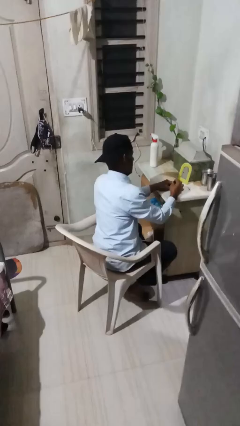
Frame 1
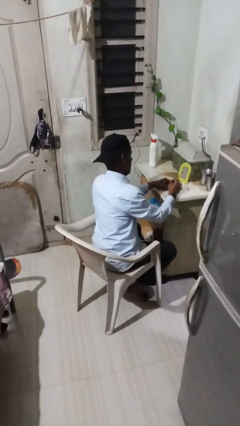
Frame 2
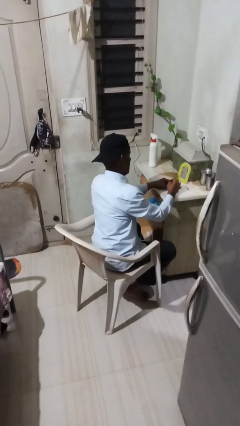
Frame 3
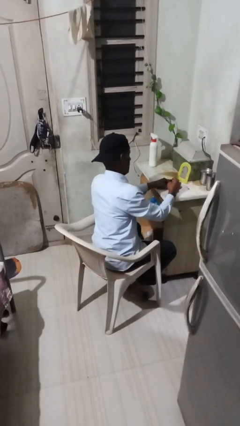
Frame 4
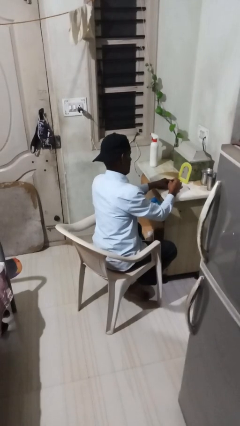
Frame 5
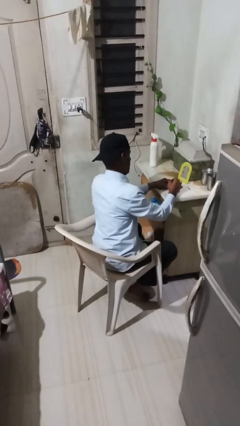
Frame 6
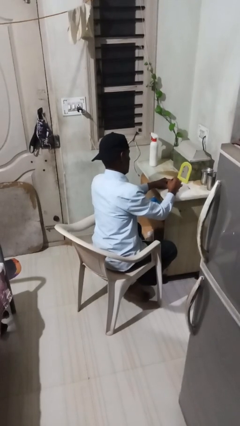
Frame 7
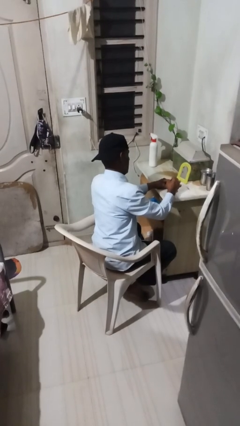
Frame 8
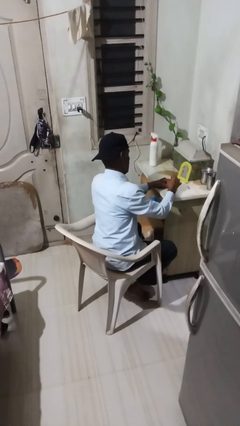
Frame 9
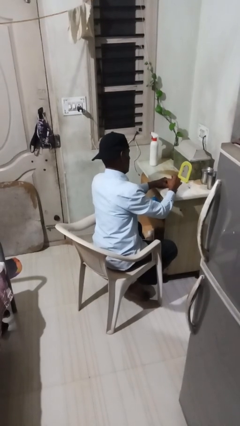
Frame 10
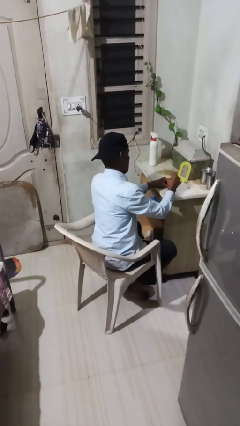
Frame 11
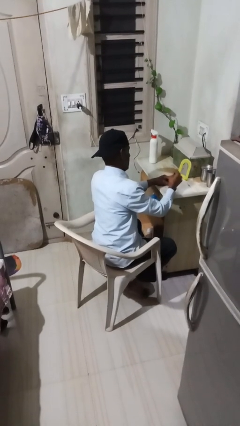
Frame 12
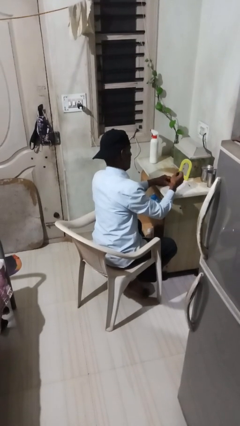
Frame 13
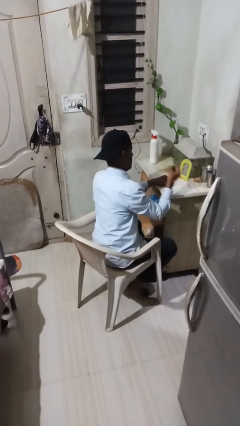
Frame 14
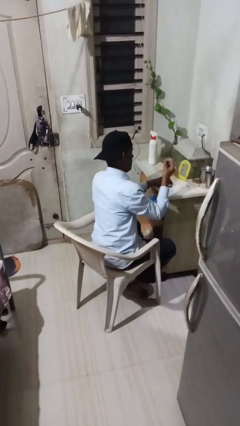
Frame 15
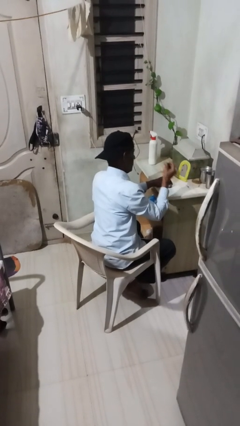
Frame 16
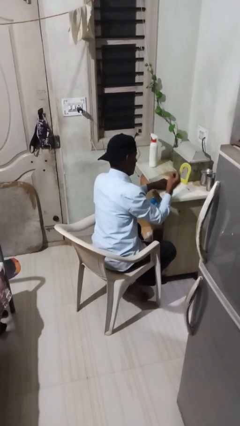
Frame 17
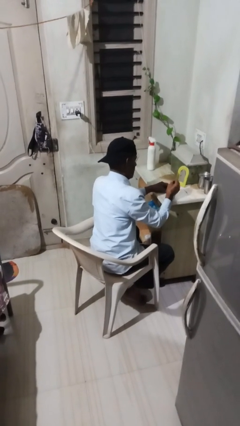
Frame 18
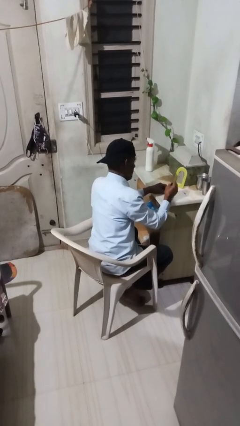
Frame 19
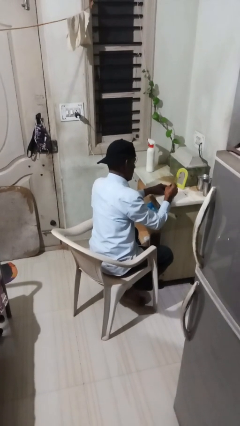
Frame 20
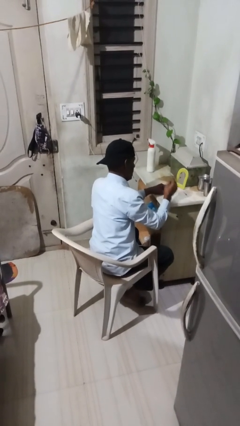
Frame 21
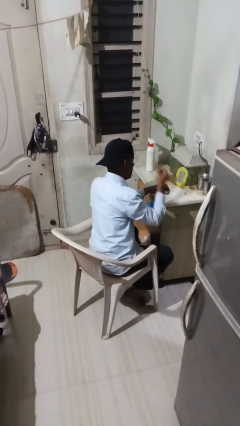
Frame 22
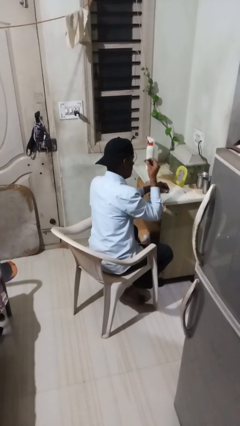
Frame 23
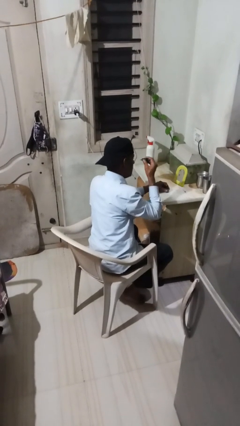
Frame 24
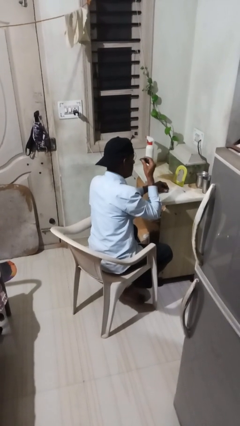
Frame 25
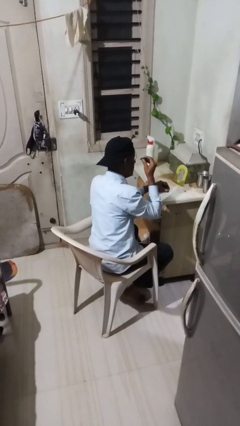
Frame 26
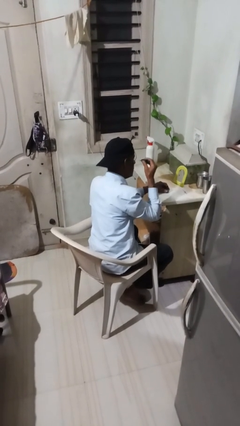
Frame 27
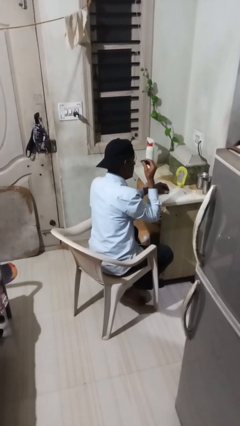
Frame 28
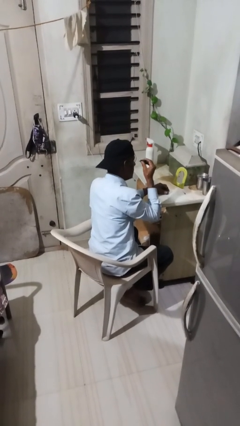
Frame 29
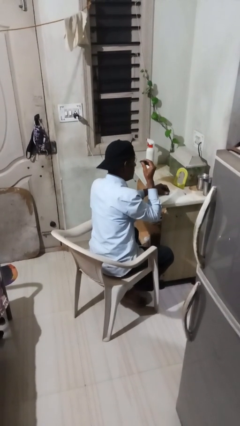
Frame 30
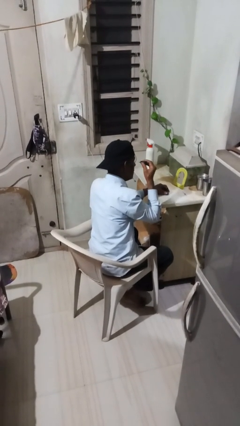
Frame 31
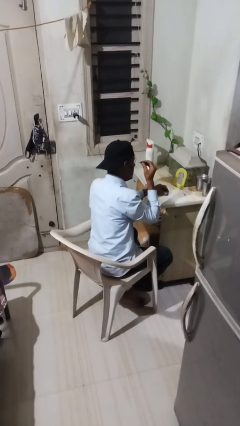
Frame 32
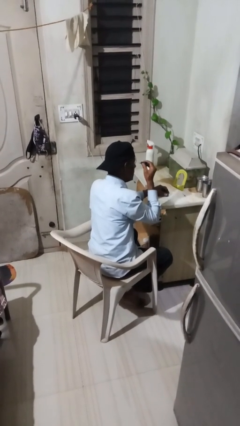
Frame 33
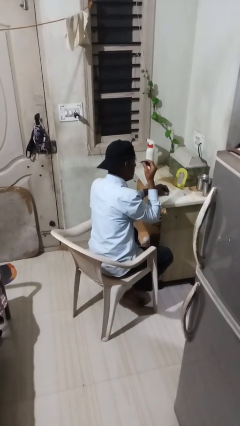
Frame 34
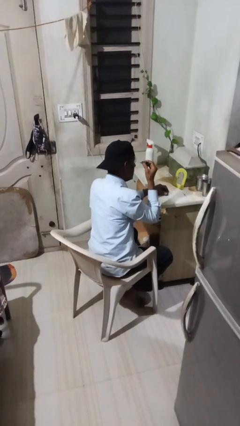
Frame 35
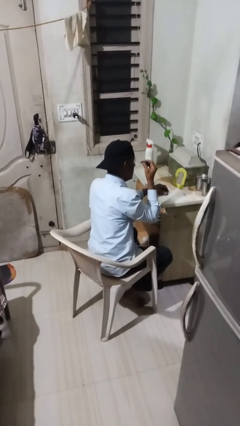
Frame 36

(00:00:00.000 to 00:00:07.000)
person applies eye makeup

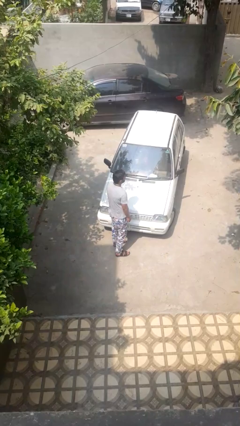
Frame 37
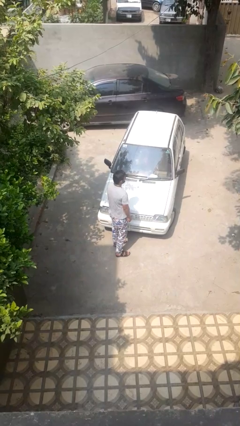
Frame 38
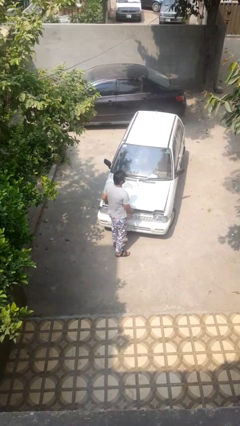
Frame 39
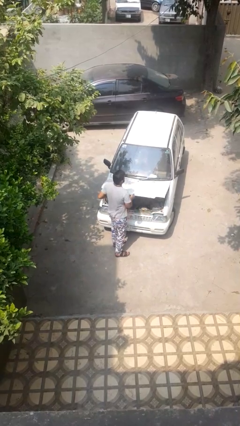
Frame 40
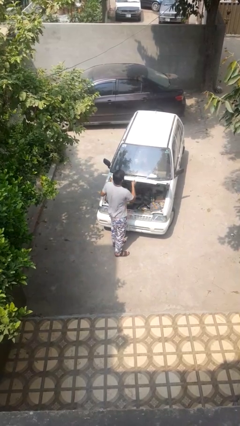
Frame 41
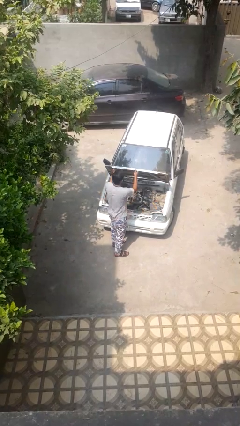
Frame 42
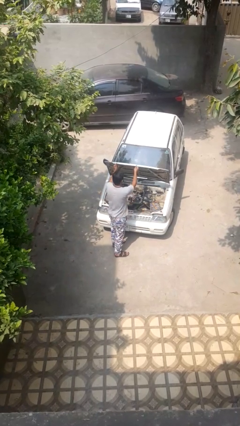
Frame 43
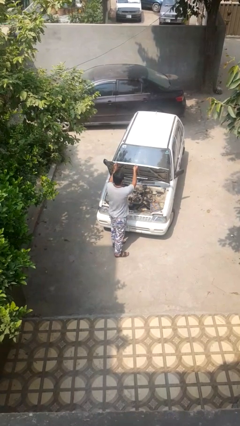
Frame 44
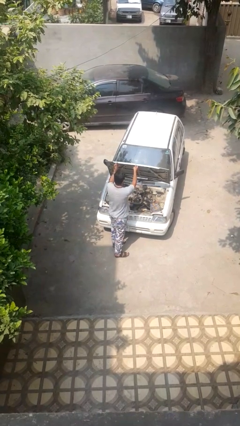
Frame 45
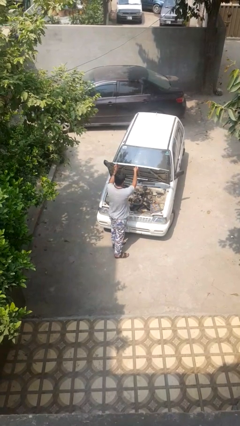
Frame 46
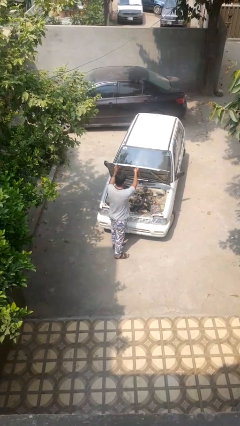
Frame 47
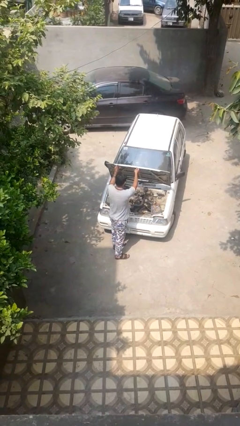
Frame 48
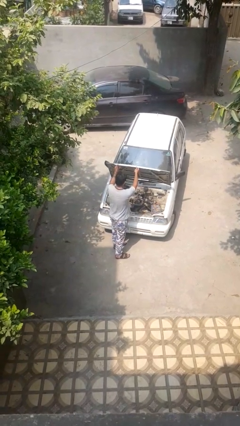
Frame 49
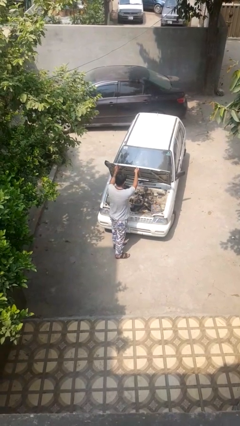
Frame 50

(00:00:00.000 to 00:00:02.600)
person opens car hood

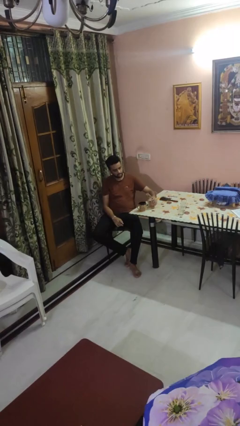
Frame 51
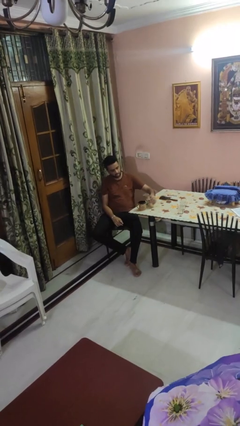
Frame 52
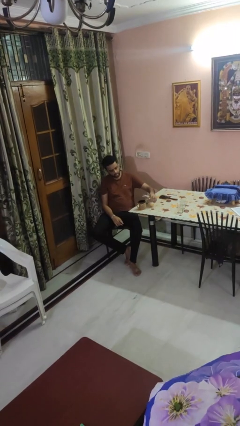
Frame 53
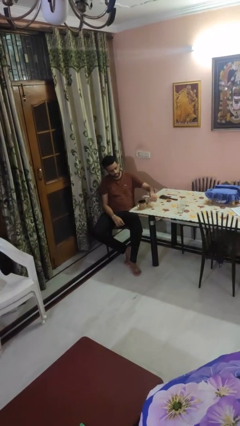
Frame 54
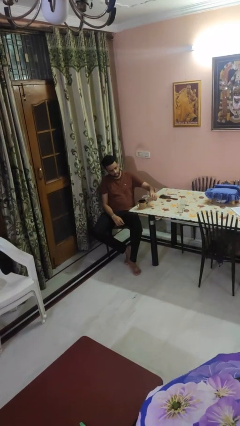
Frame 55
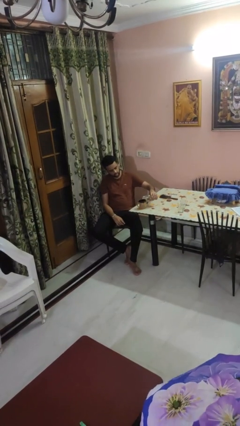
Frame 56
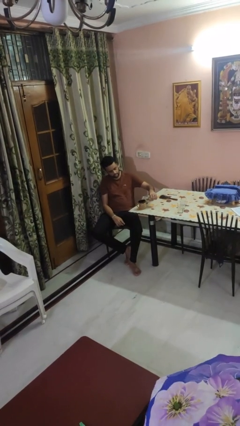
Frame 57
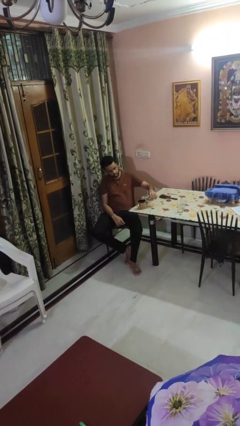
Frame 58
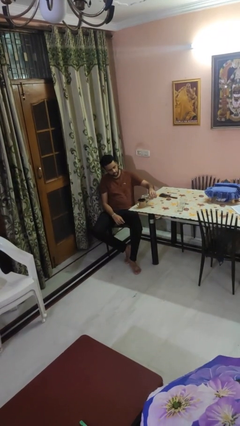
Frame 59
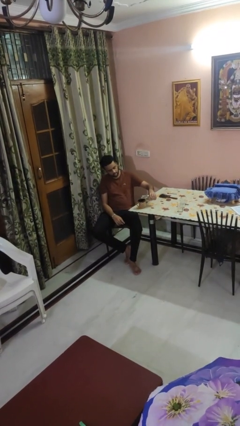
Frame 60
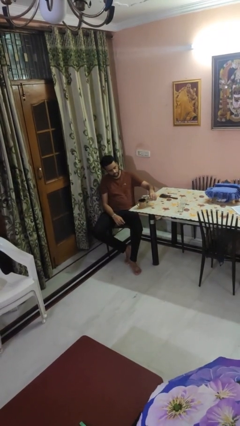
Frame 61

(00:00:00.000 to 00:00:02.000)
person pours liquid into cup

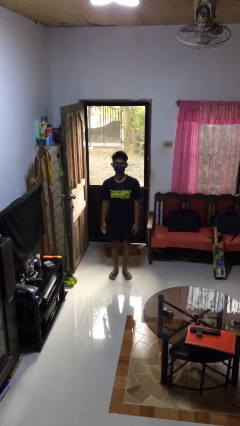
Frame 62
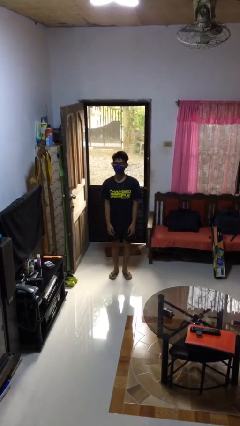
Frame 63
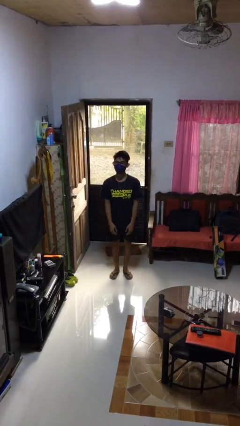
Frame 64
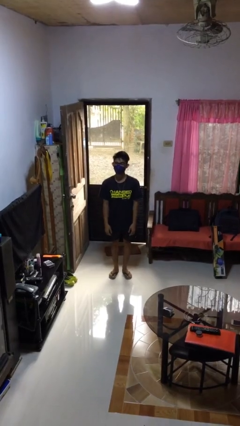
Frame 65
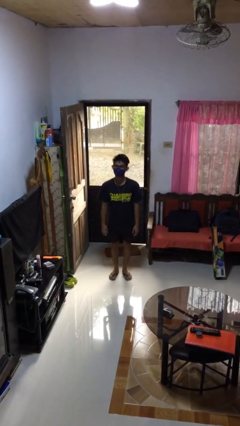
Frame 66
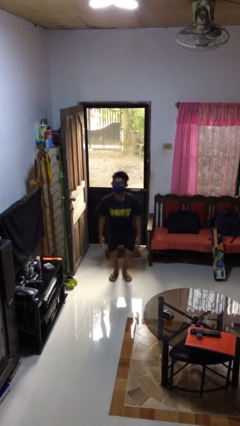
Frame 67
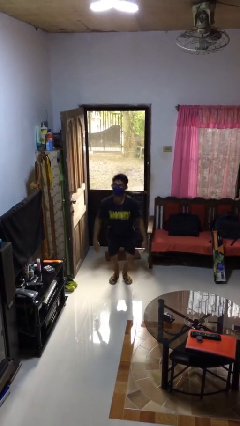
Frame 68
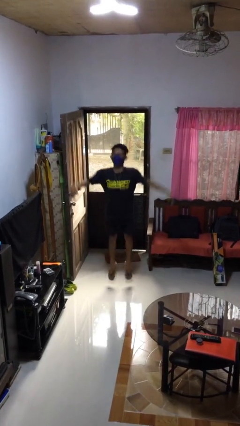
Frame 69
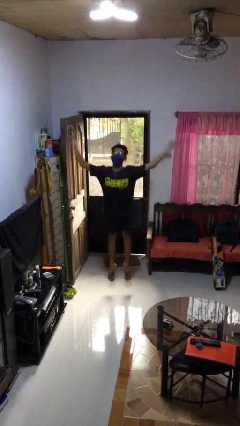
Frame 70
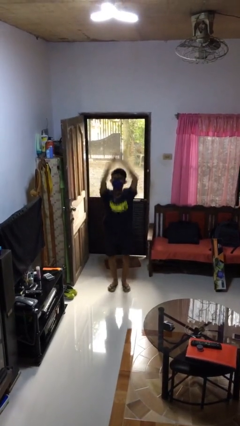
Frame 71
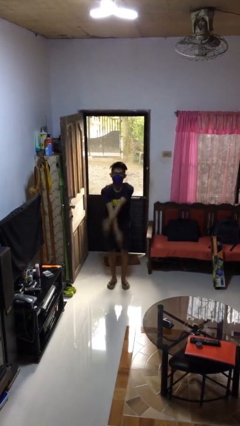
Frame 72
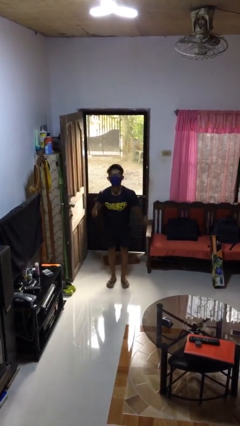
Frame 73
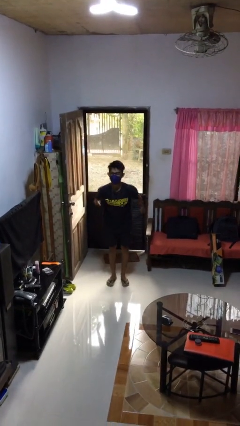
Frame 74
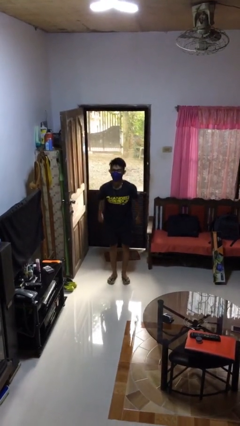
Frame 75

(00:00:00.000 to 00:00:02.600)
person jumps

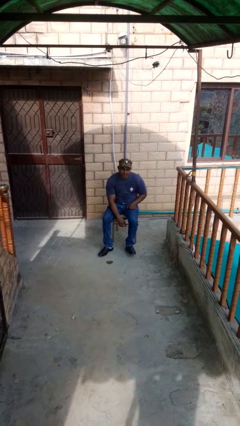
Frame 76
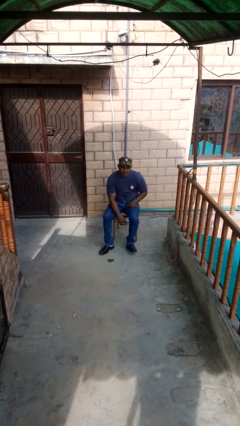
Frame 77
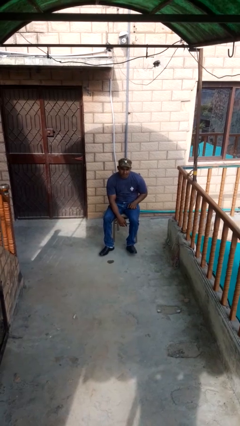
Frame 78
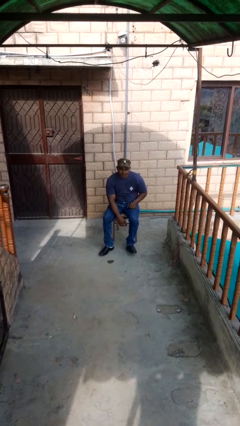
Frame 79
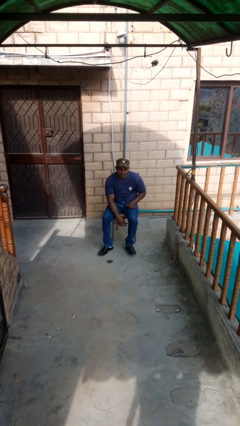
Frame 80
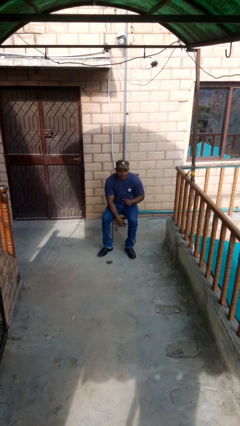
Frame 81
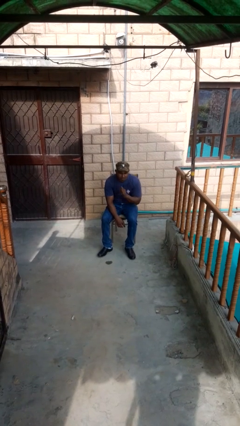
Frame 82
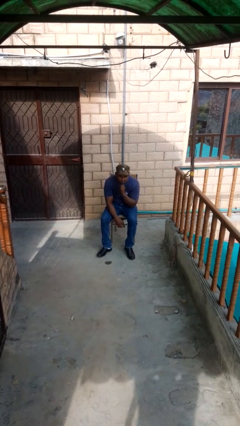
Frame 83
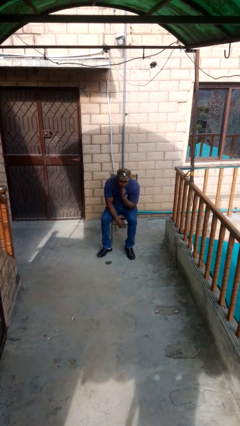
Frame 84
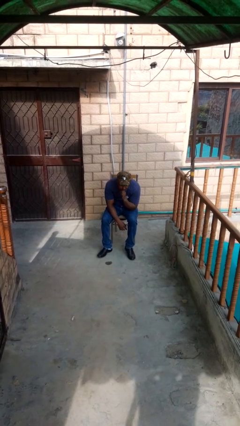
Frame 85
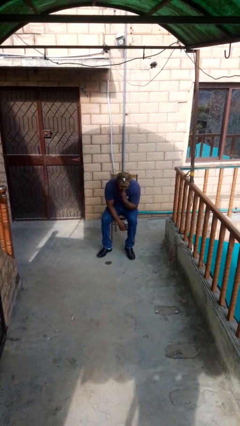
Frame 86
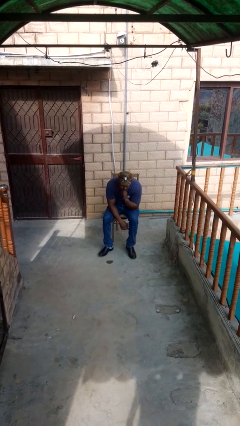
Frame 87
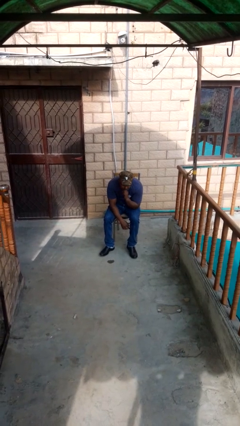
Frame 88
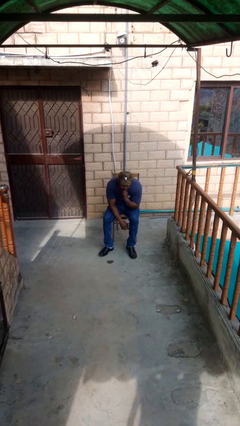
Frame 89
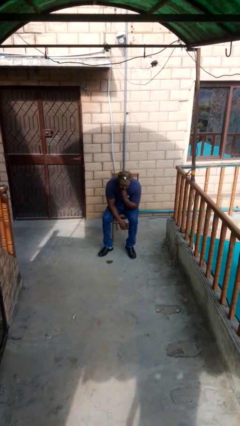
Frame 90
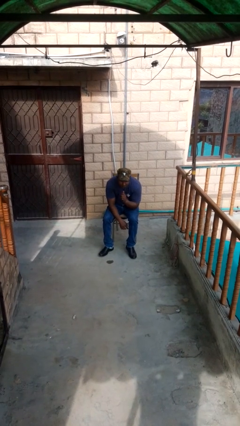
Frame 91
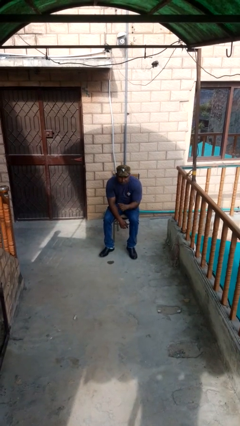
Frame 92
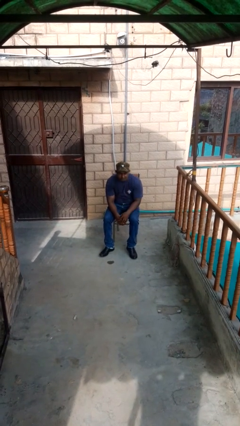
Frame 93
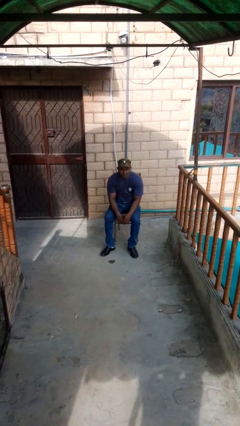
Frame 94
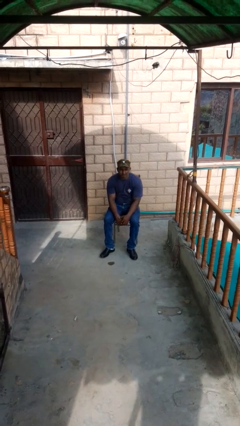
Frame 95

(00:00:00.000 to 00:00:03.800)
person strokes chin
